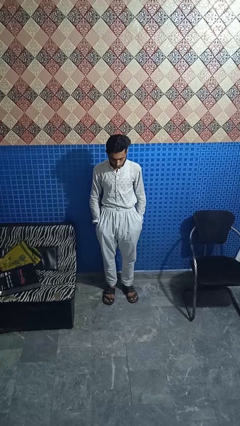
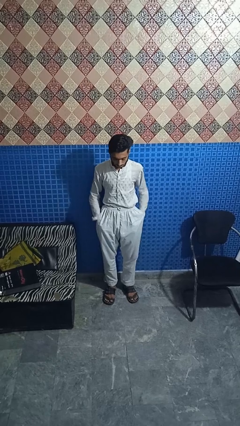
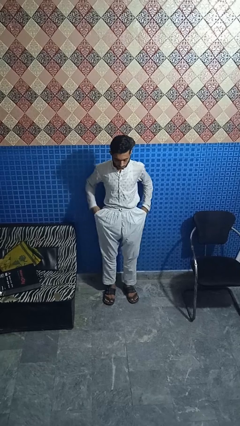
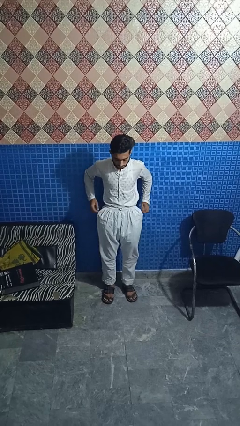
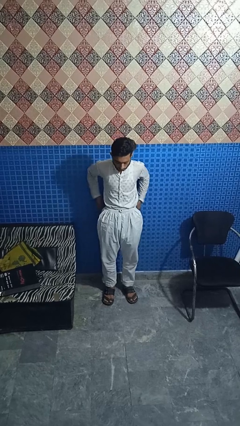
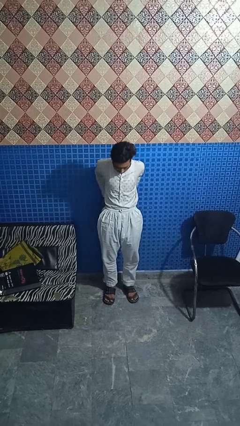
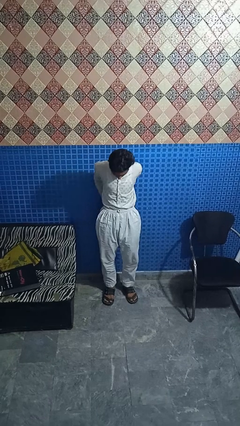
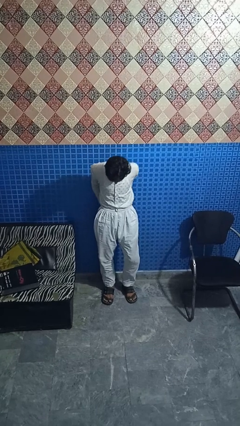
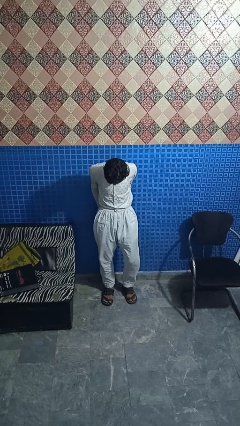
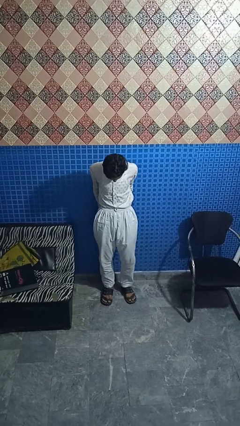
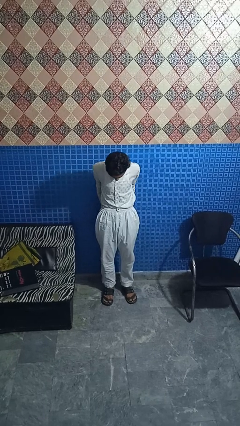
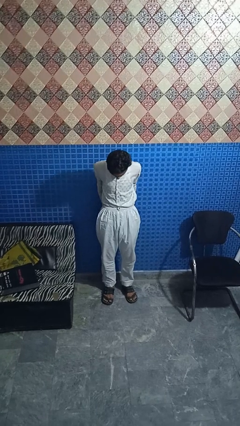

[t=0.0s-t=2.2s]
person puts hands in back pockets

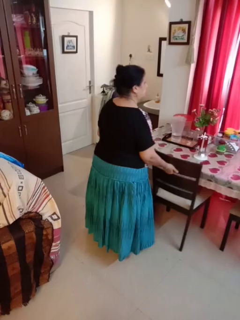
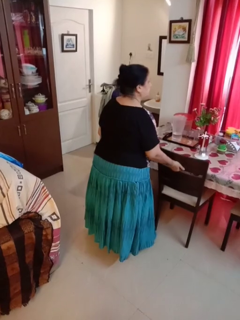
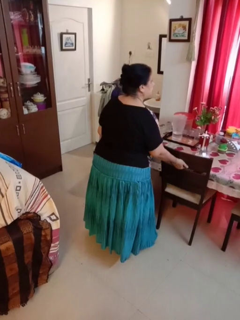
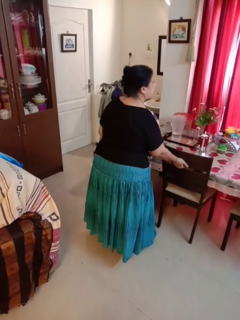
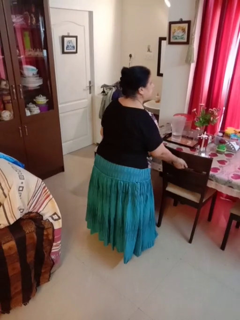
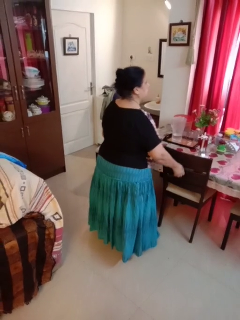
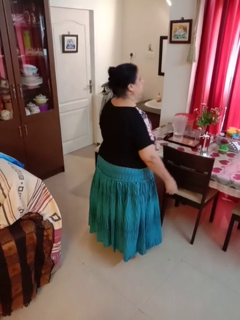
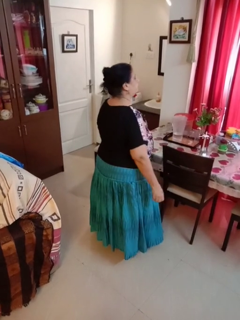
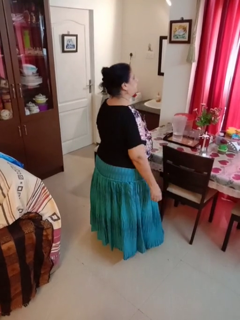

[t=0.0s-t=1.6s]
person pushes in chair

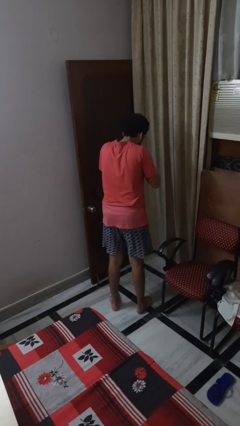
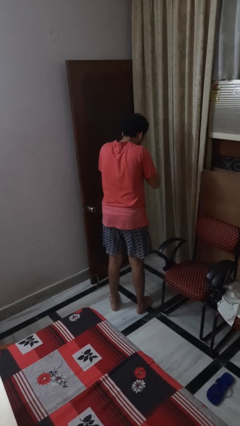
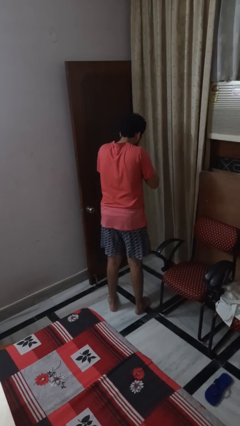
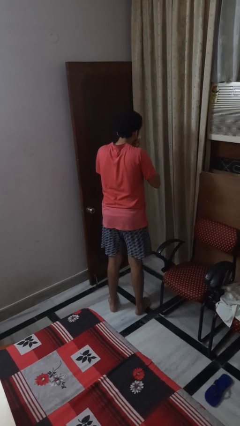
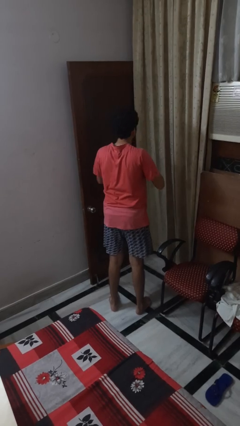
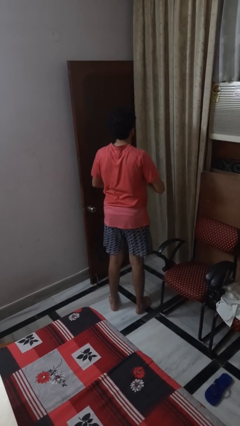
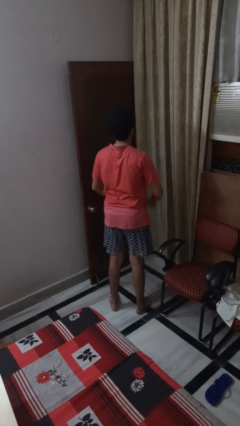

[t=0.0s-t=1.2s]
person sneezes into hand

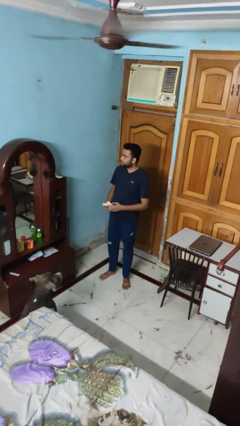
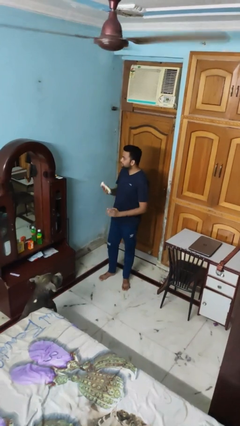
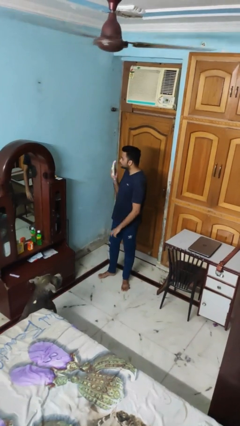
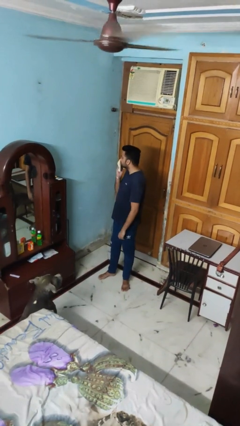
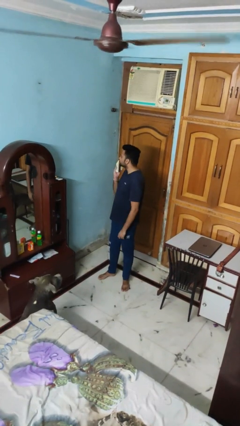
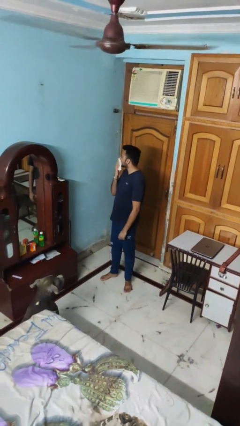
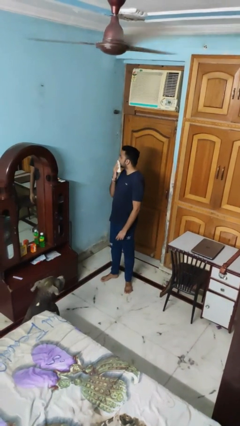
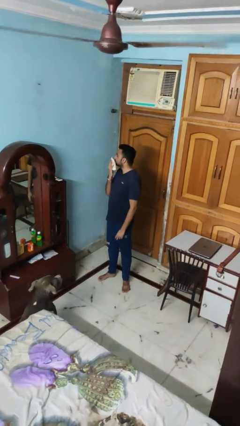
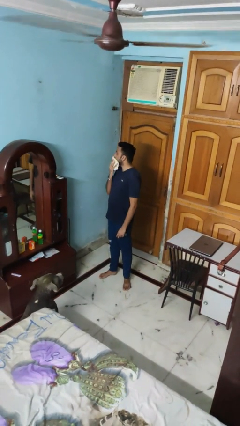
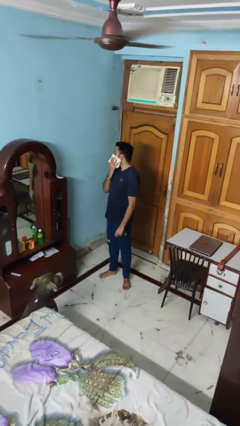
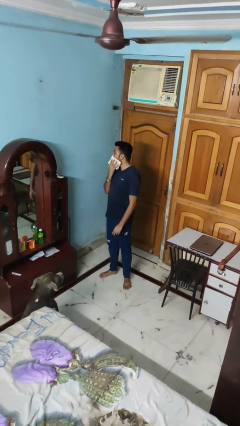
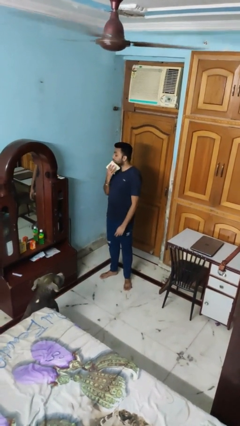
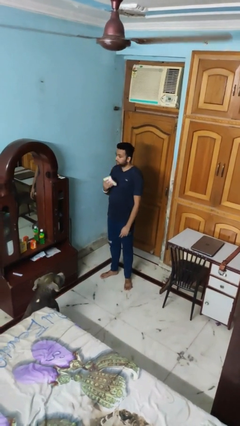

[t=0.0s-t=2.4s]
person wipes mouth with napkin

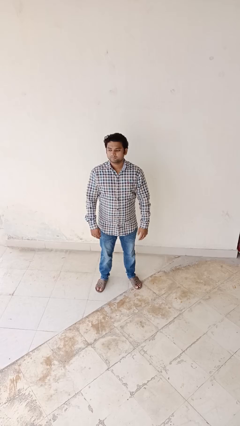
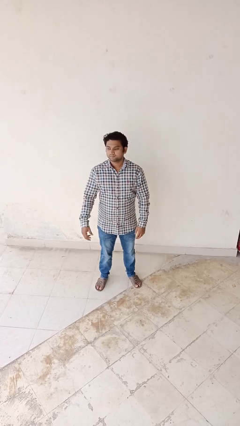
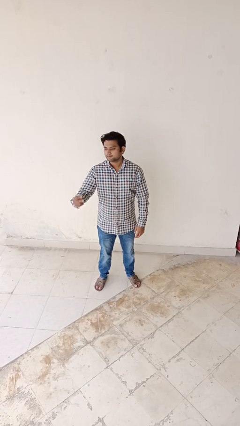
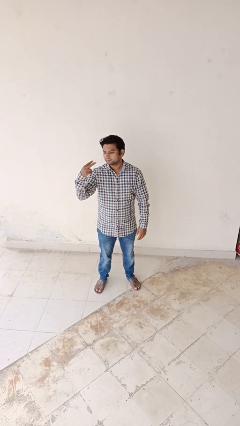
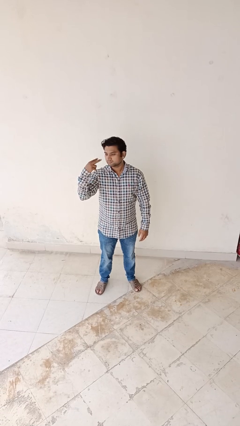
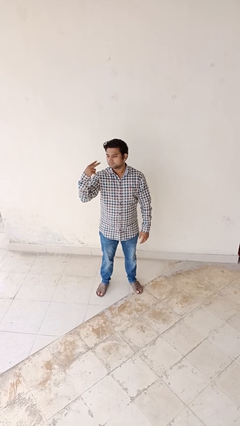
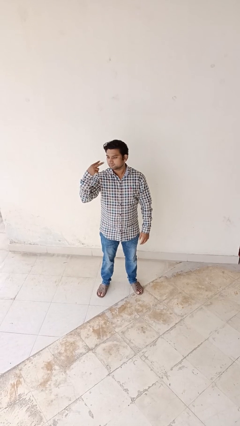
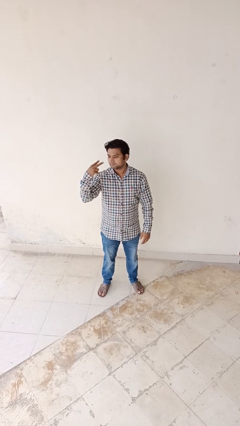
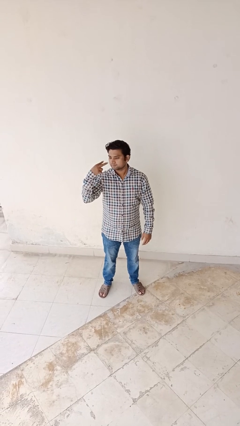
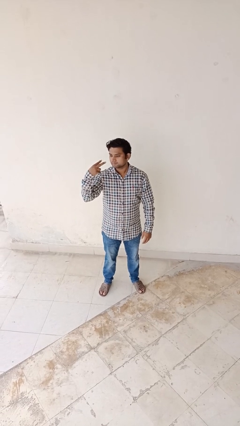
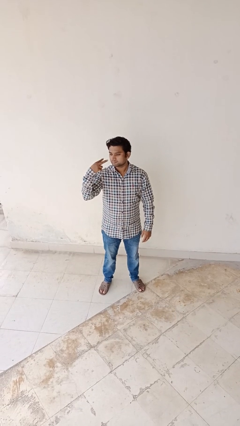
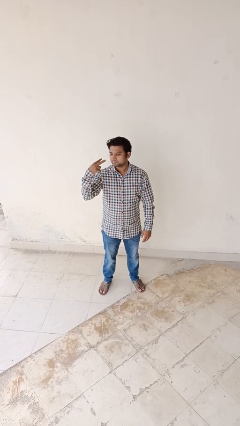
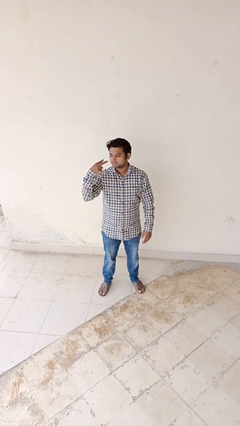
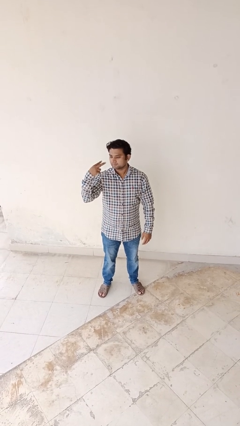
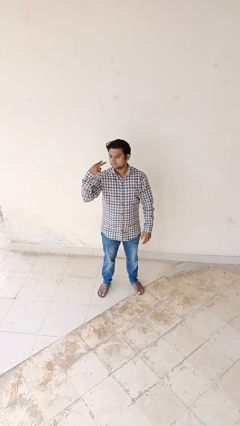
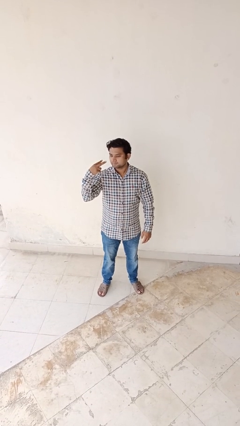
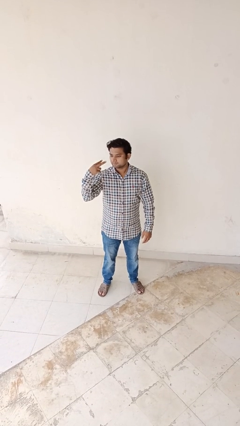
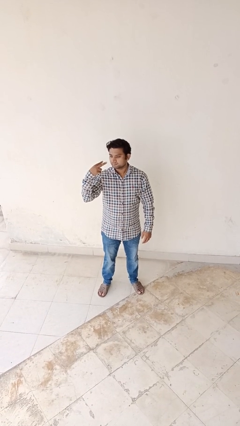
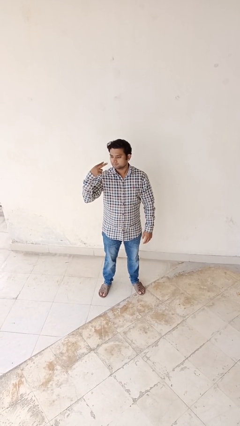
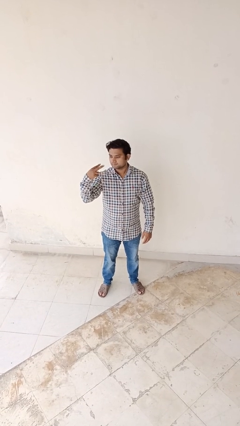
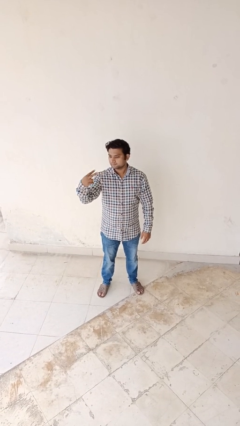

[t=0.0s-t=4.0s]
person gestures watch closely

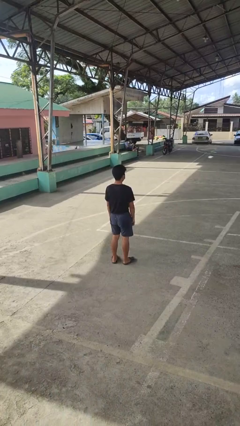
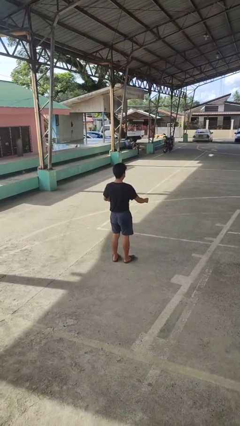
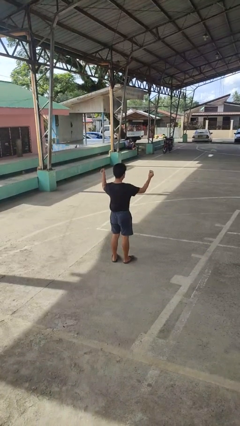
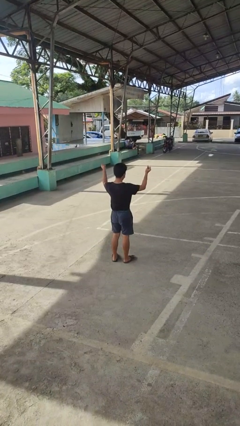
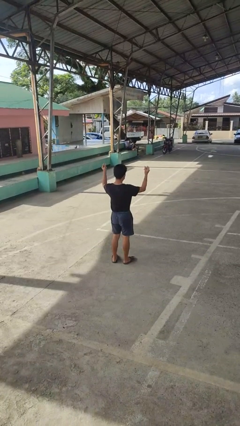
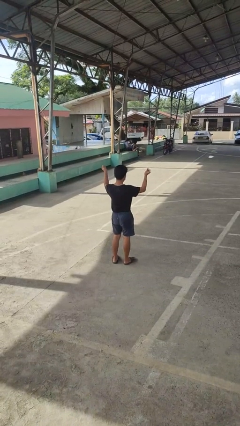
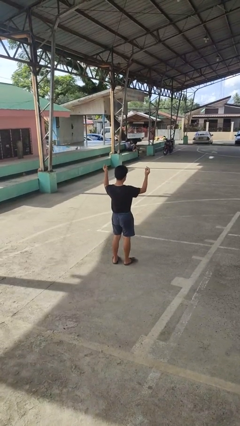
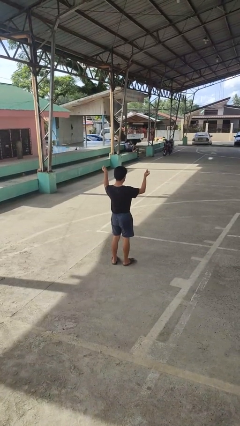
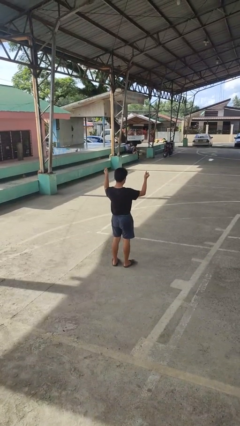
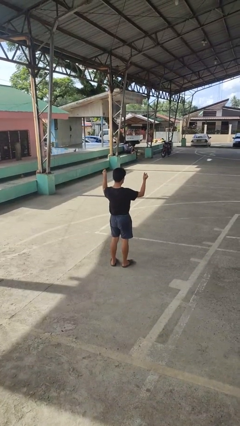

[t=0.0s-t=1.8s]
person snaps fingers

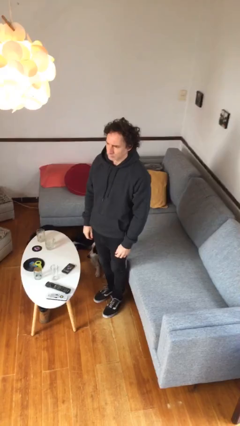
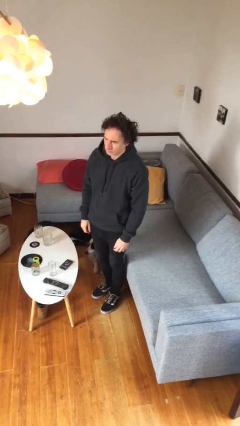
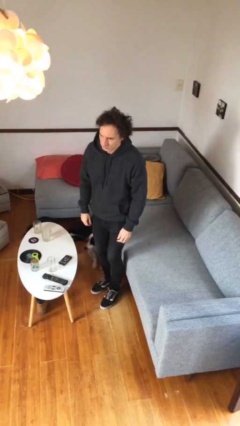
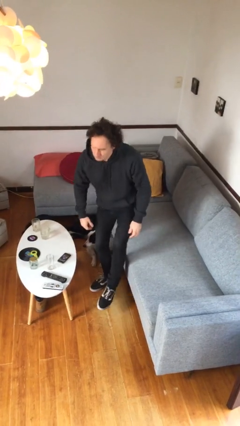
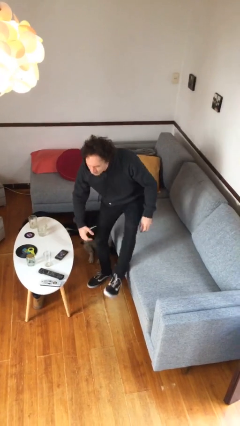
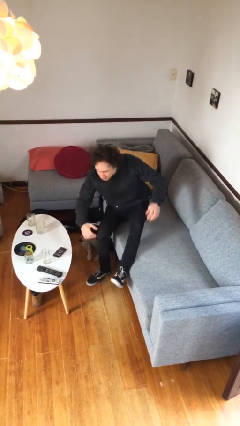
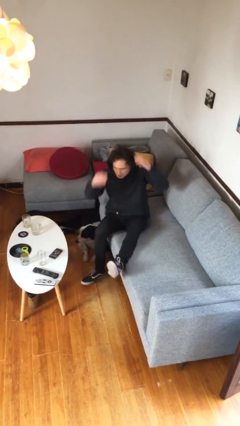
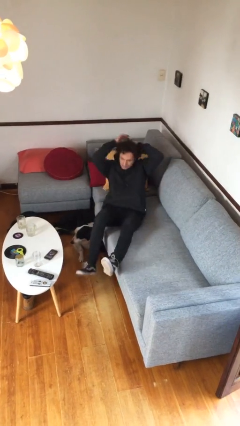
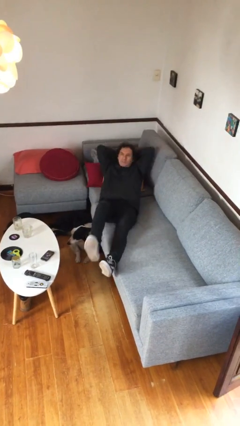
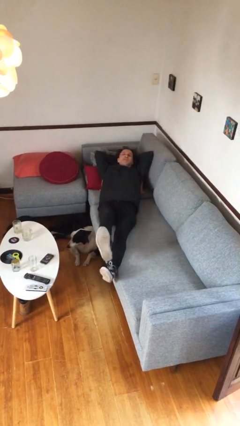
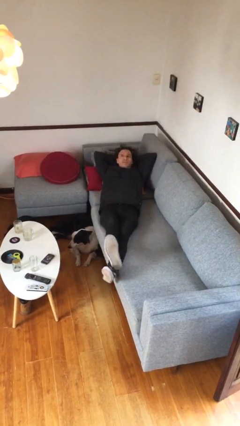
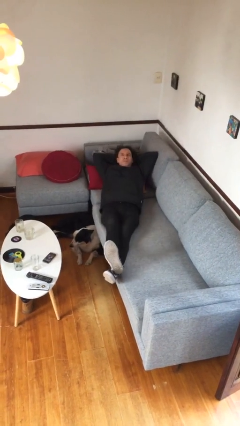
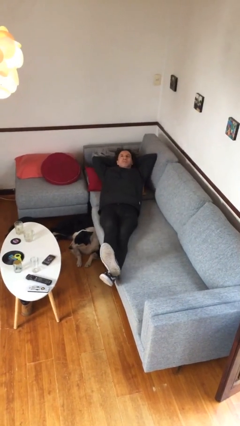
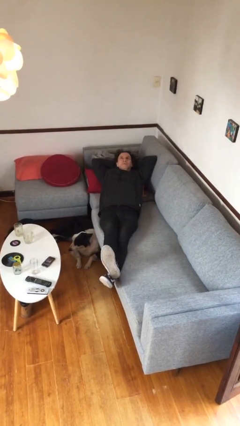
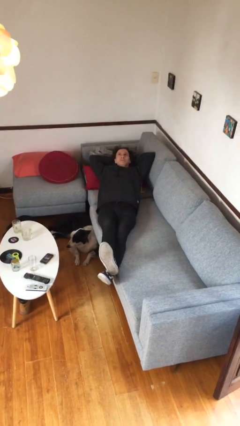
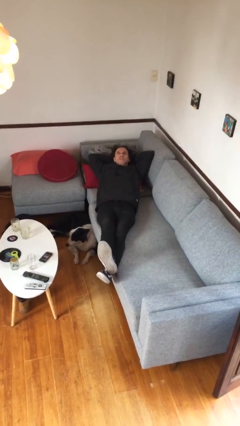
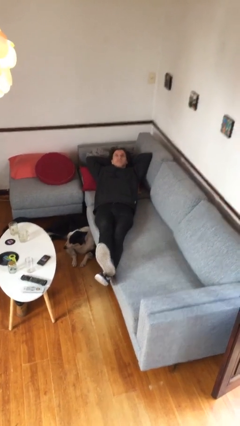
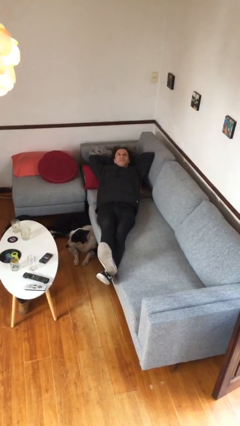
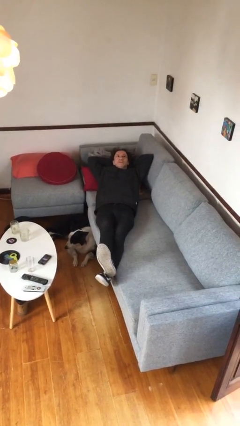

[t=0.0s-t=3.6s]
person lies down on couch

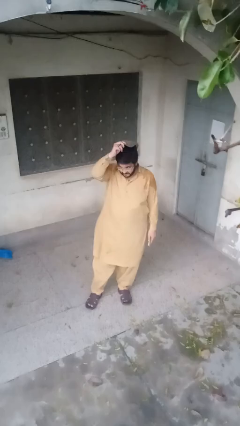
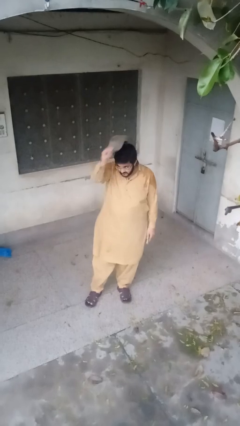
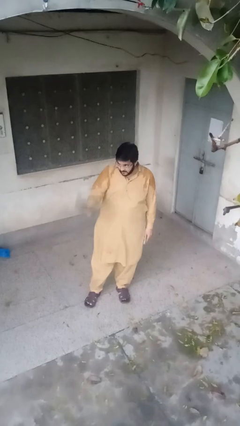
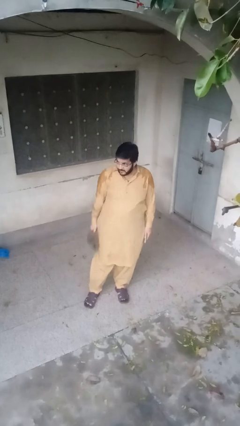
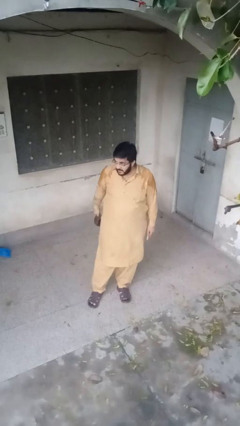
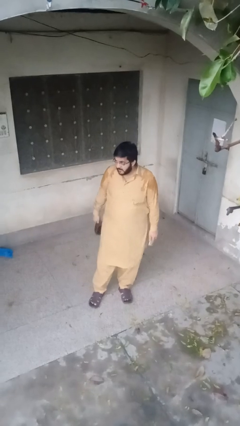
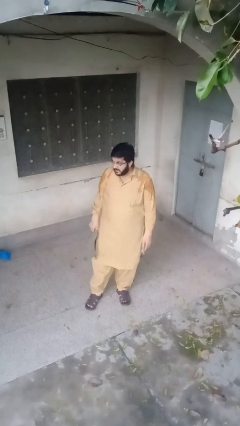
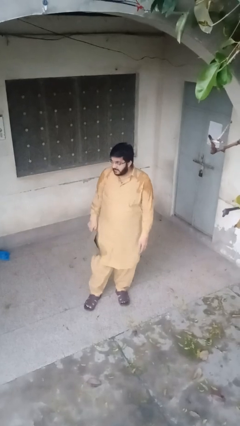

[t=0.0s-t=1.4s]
person takes off hat
